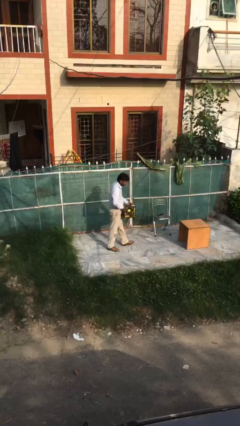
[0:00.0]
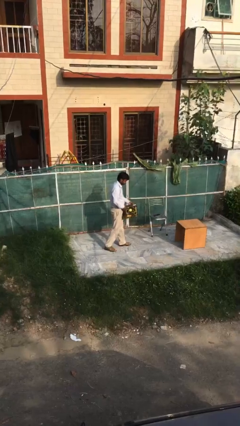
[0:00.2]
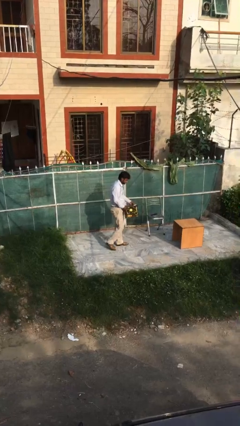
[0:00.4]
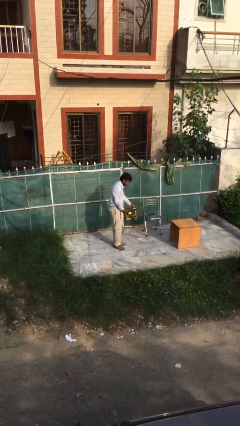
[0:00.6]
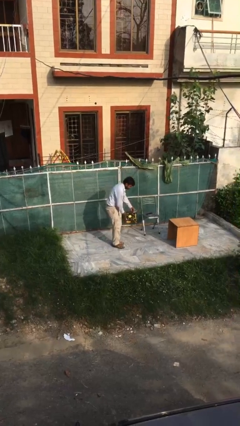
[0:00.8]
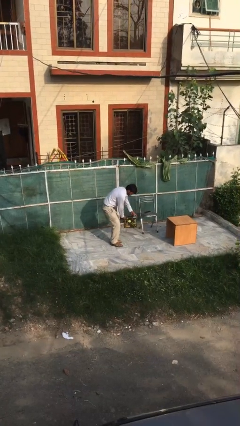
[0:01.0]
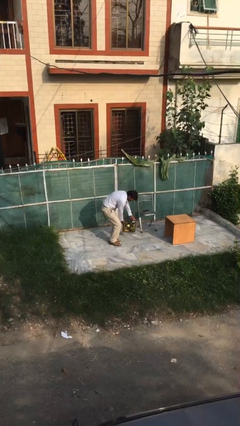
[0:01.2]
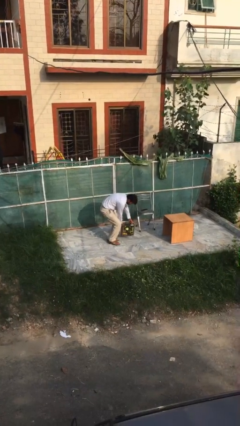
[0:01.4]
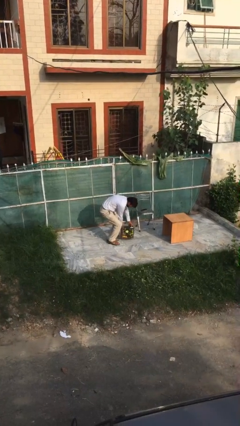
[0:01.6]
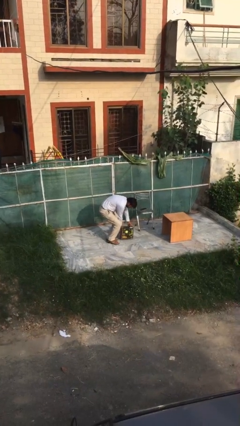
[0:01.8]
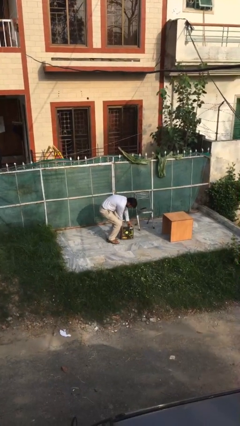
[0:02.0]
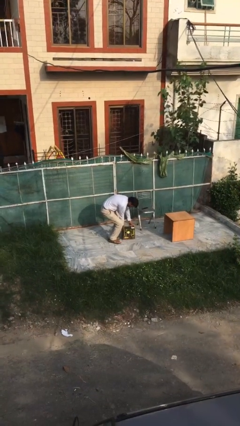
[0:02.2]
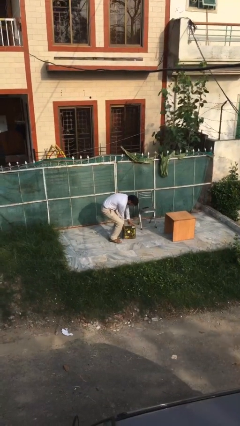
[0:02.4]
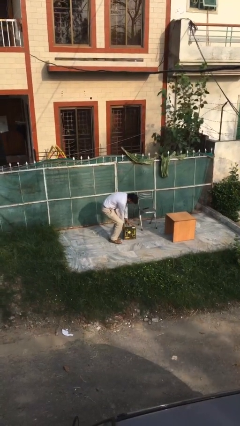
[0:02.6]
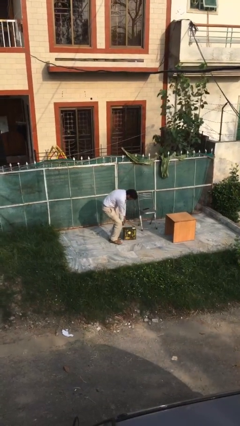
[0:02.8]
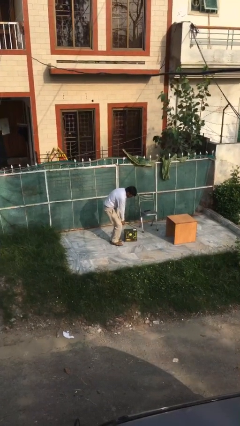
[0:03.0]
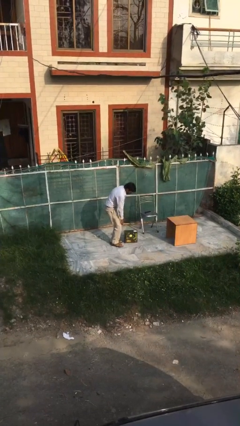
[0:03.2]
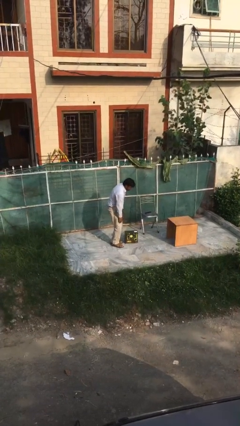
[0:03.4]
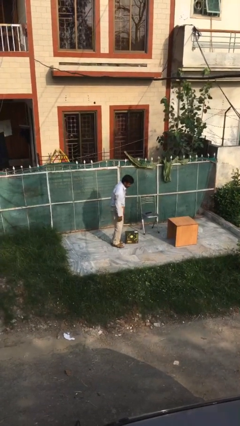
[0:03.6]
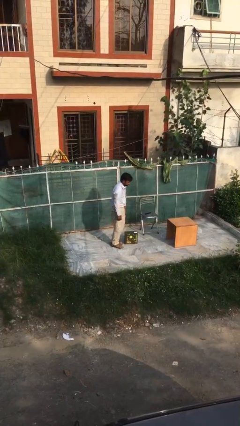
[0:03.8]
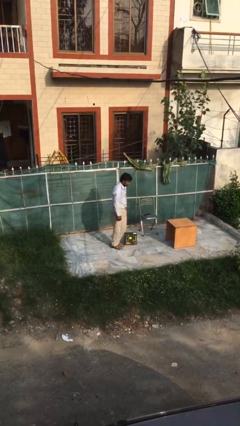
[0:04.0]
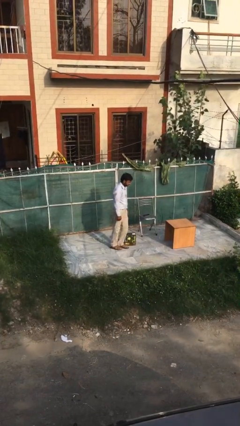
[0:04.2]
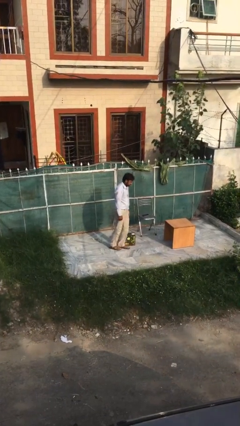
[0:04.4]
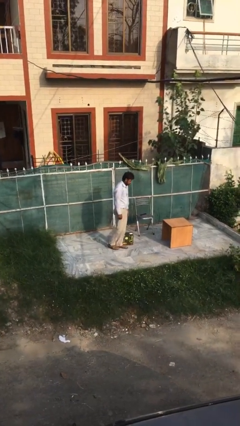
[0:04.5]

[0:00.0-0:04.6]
person puts down object on floor

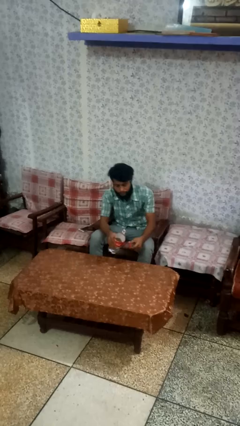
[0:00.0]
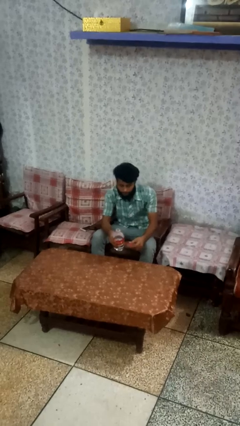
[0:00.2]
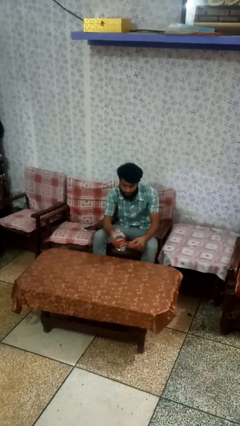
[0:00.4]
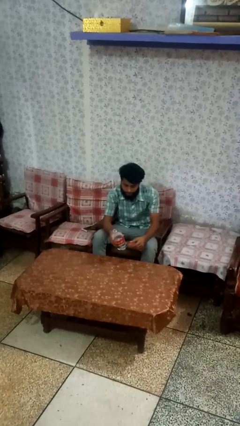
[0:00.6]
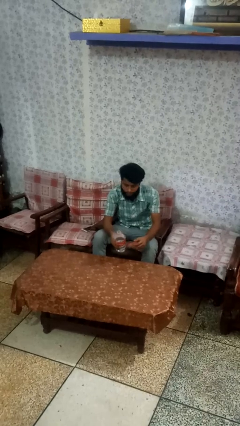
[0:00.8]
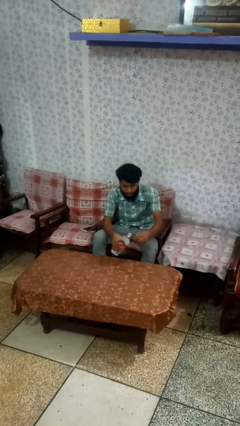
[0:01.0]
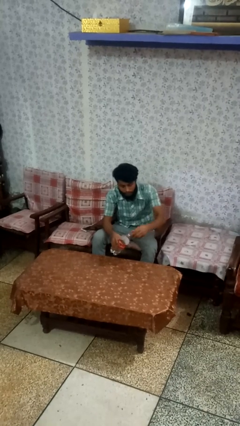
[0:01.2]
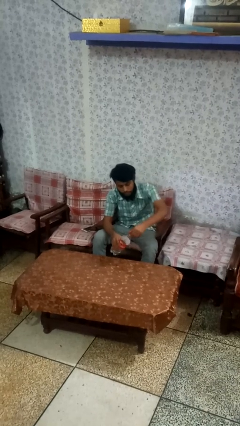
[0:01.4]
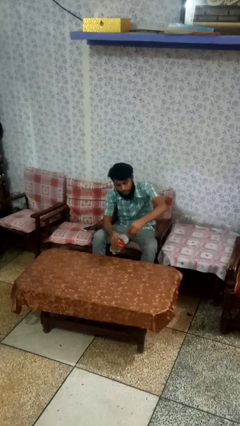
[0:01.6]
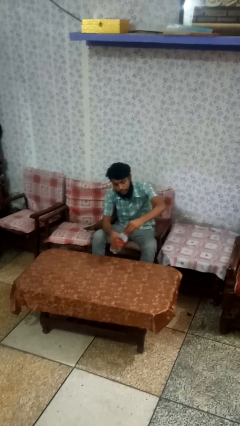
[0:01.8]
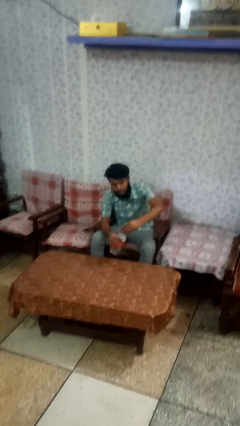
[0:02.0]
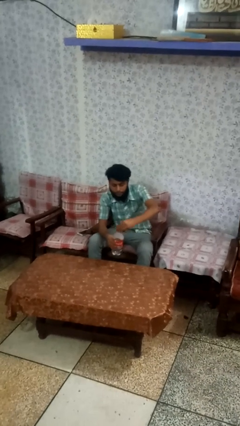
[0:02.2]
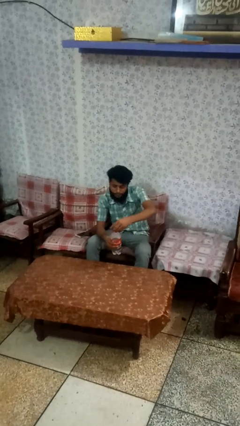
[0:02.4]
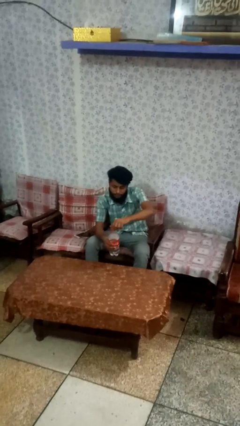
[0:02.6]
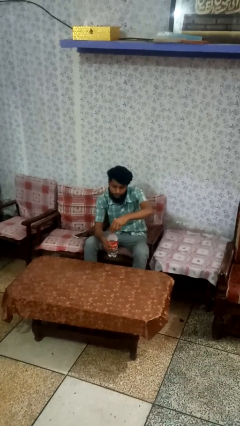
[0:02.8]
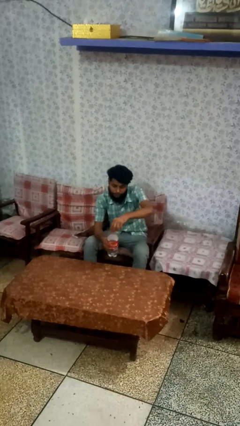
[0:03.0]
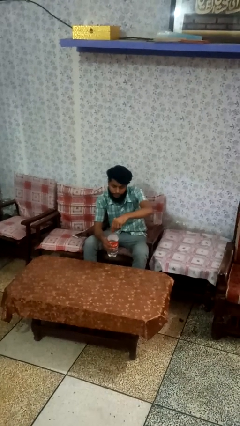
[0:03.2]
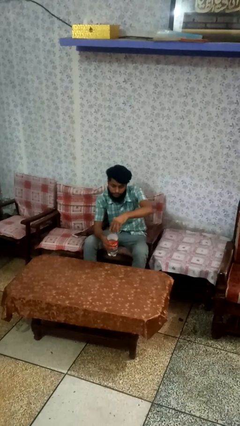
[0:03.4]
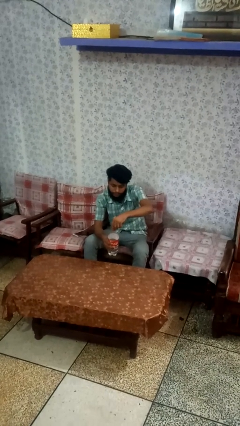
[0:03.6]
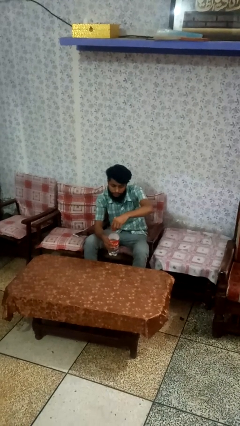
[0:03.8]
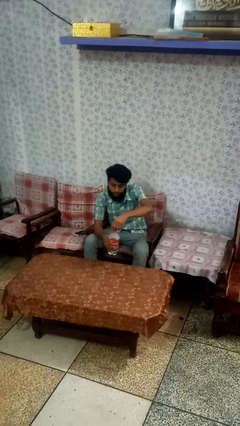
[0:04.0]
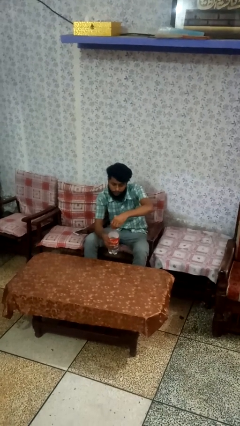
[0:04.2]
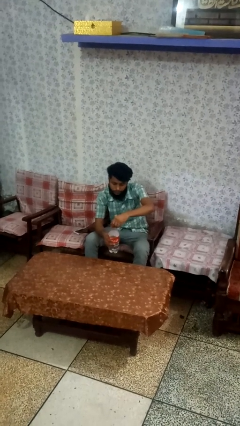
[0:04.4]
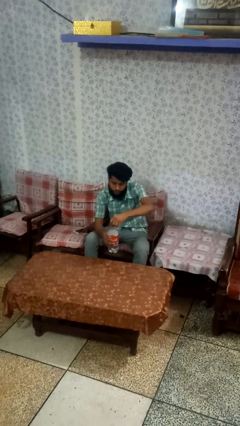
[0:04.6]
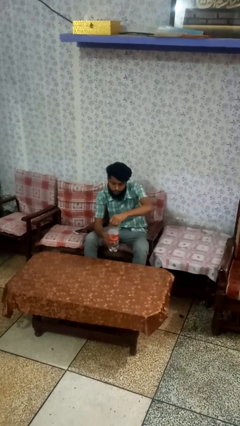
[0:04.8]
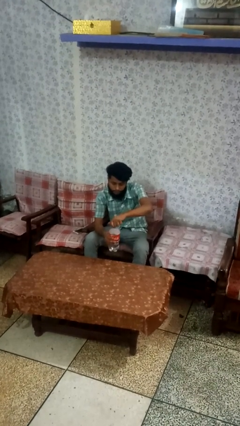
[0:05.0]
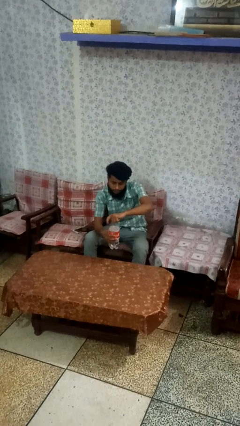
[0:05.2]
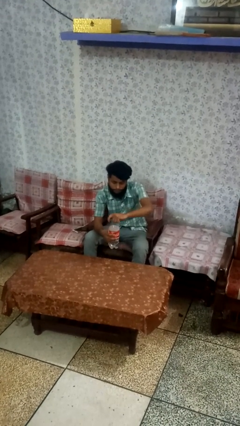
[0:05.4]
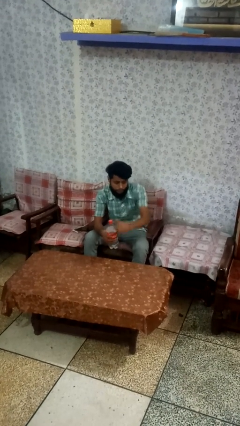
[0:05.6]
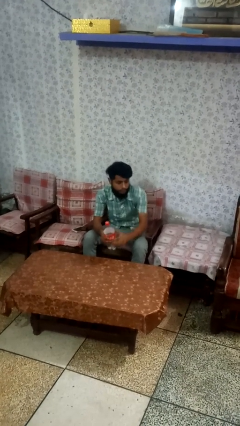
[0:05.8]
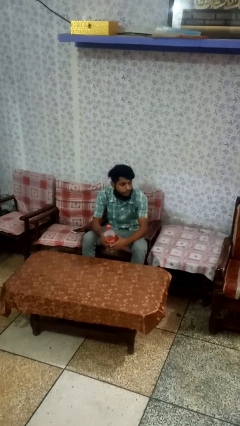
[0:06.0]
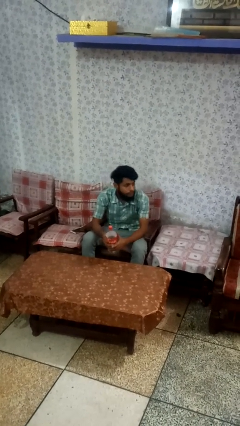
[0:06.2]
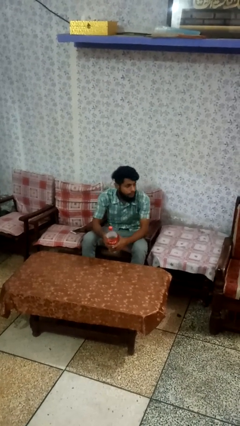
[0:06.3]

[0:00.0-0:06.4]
person screws lid to bottle

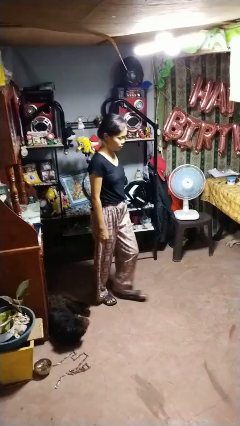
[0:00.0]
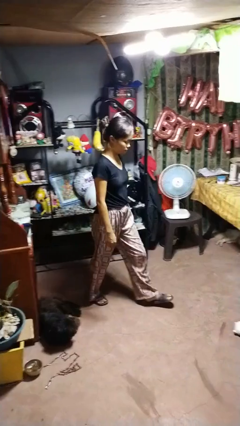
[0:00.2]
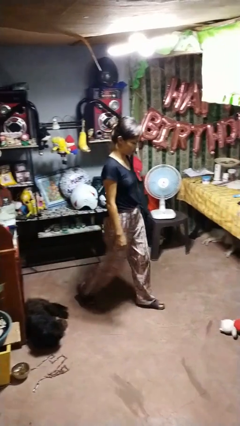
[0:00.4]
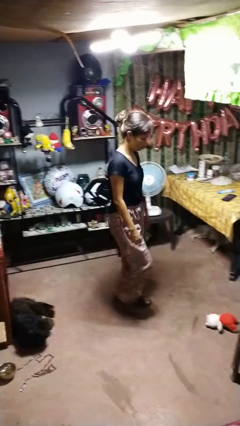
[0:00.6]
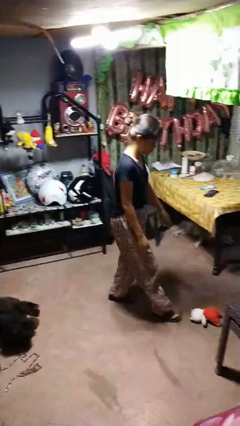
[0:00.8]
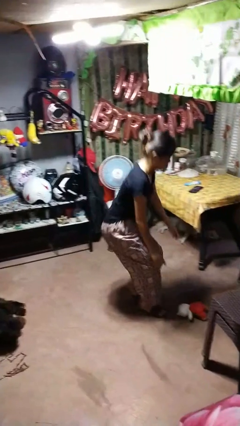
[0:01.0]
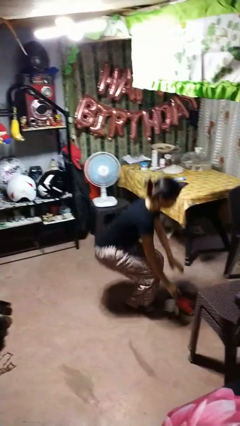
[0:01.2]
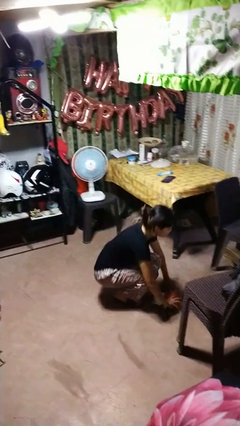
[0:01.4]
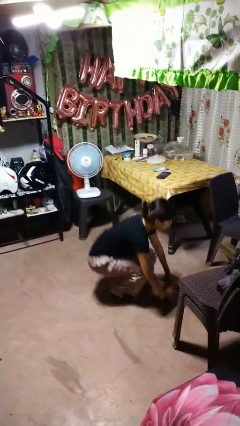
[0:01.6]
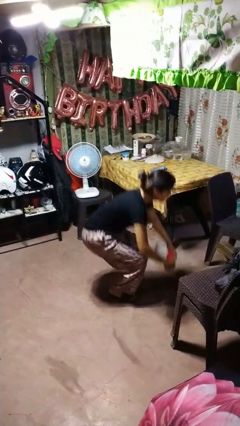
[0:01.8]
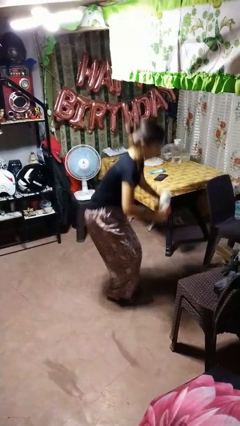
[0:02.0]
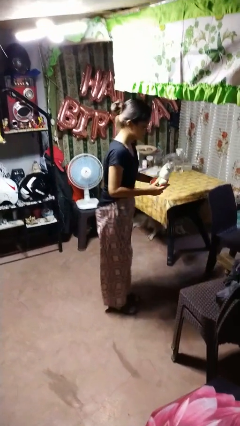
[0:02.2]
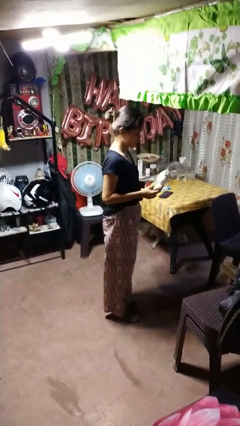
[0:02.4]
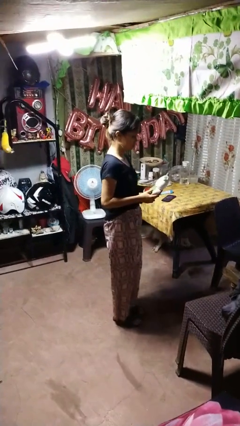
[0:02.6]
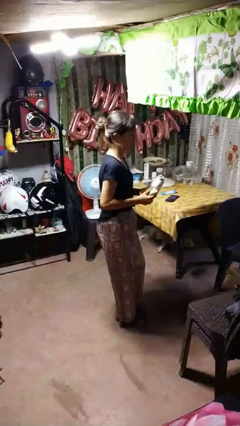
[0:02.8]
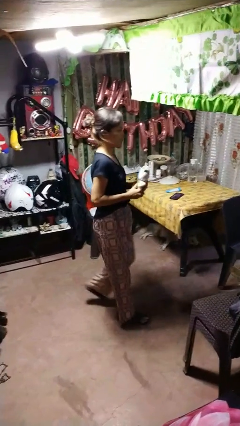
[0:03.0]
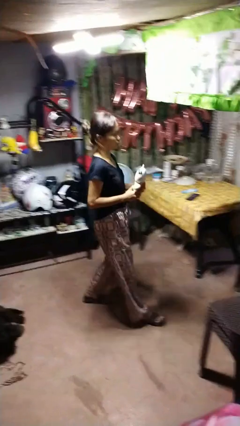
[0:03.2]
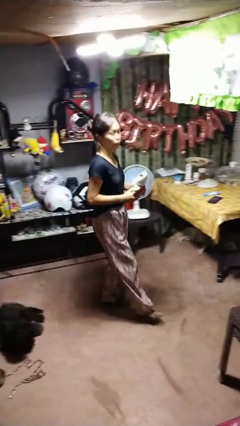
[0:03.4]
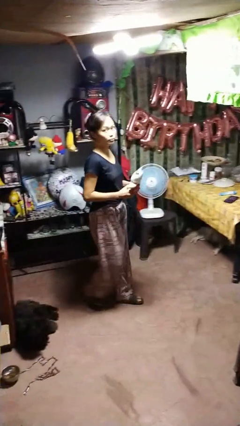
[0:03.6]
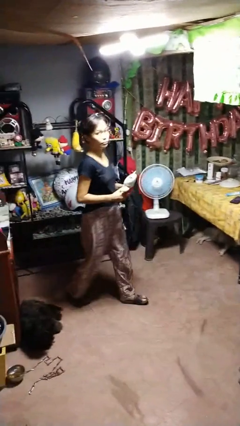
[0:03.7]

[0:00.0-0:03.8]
person picks up object from floor

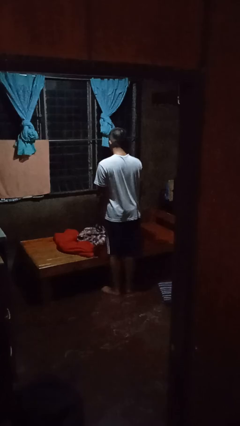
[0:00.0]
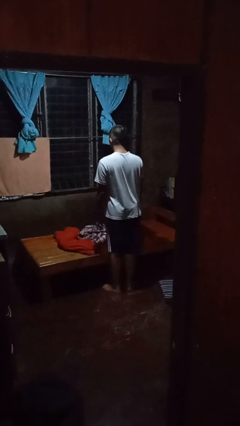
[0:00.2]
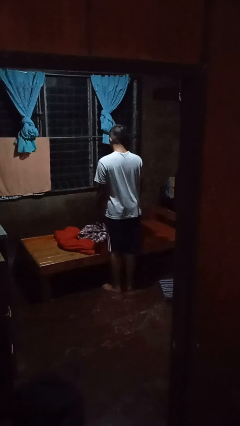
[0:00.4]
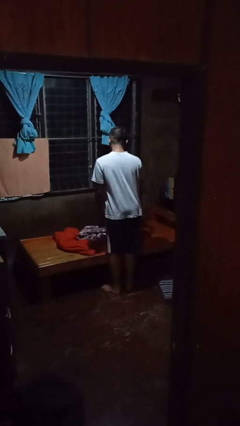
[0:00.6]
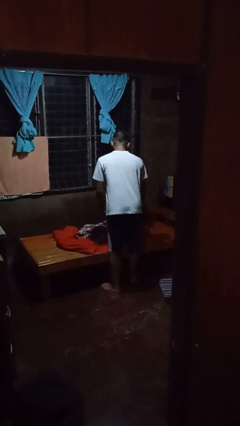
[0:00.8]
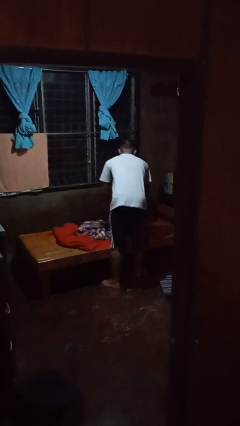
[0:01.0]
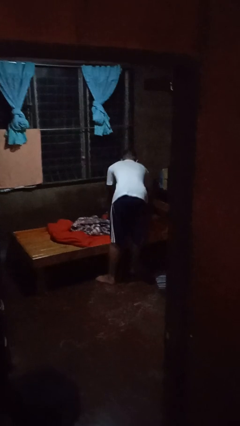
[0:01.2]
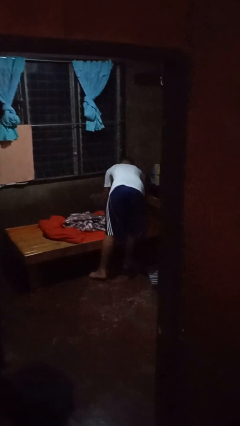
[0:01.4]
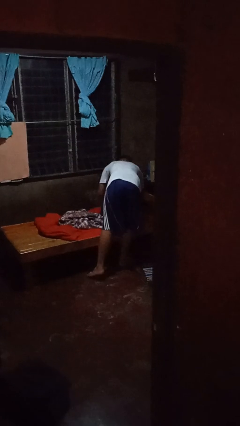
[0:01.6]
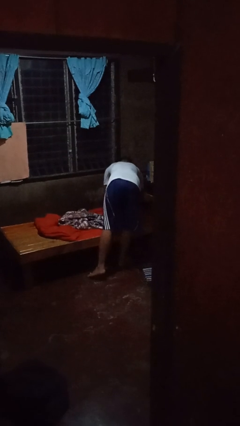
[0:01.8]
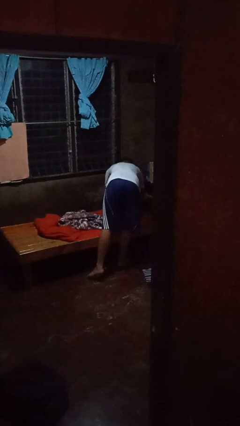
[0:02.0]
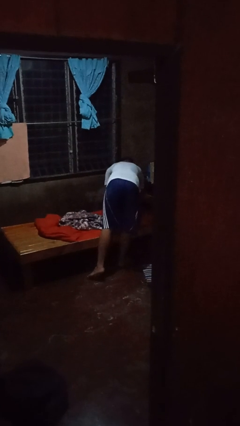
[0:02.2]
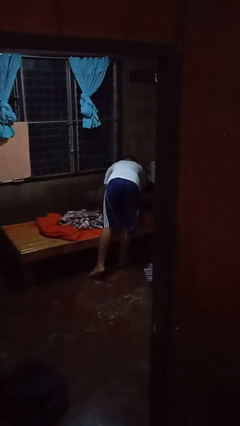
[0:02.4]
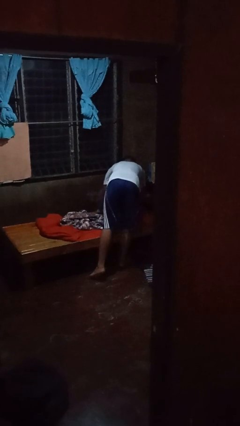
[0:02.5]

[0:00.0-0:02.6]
person makes bed

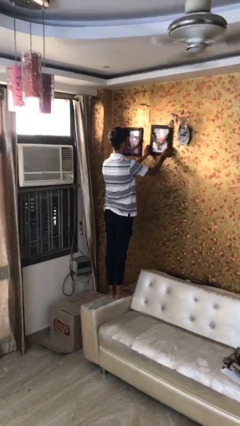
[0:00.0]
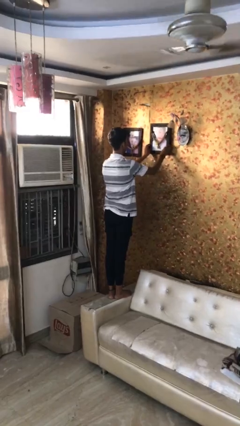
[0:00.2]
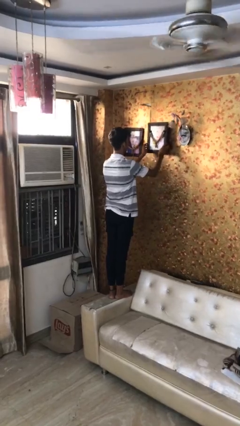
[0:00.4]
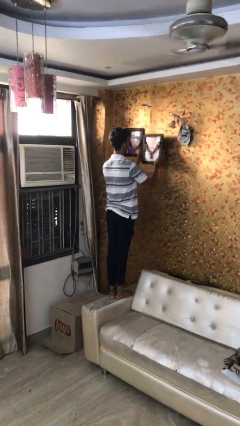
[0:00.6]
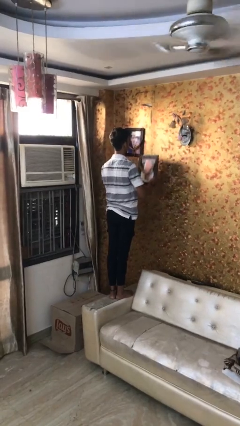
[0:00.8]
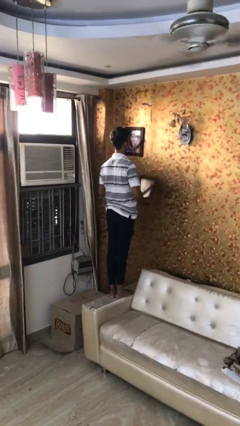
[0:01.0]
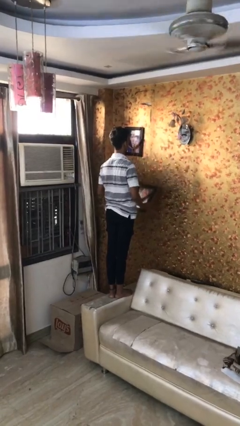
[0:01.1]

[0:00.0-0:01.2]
person takes down picture frame
